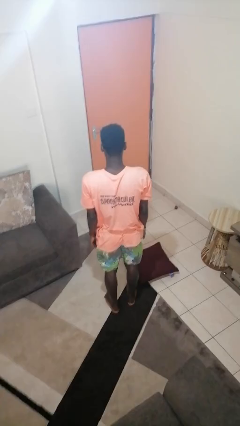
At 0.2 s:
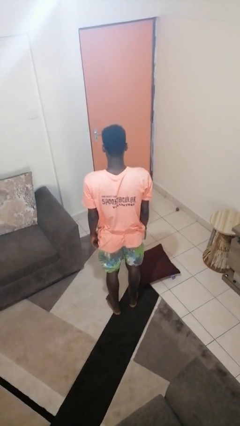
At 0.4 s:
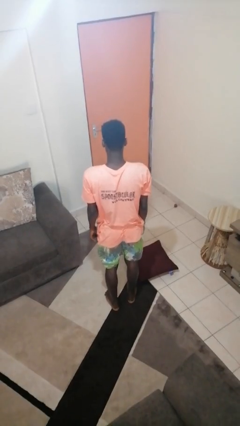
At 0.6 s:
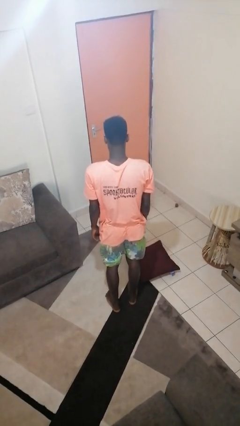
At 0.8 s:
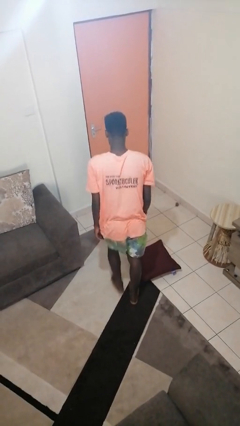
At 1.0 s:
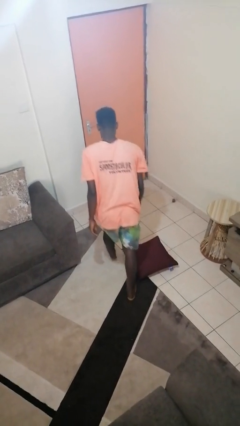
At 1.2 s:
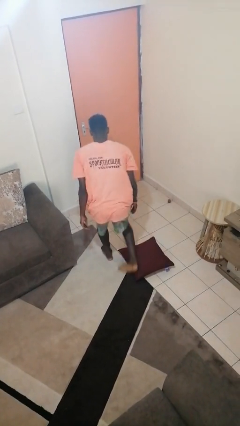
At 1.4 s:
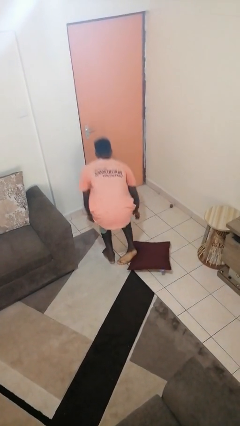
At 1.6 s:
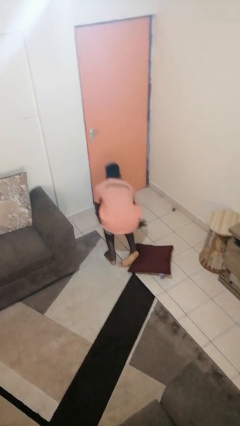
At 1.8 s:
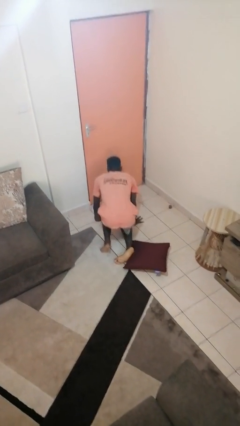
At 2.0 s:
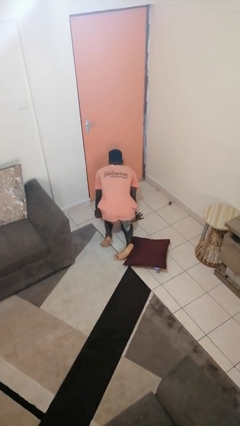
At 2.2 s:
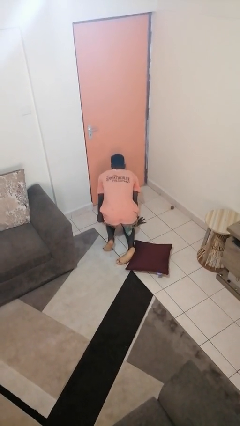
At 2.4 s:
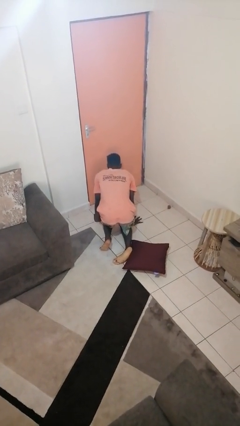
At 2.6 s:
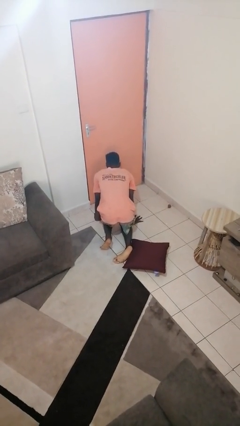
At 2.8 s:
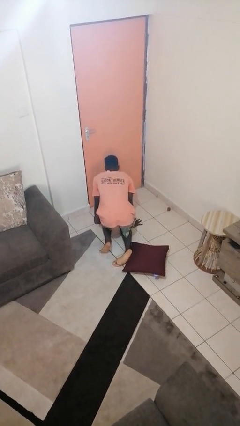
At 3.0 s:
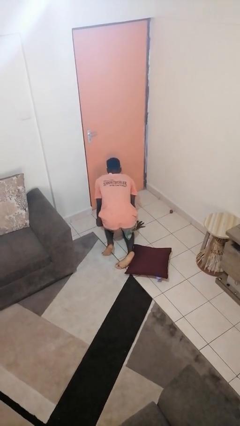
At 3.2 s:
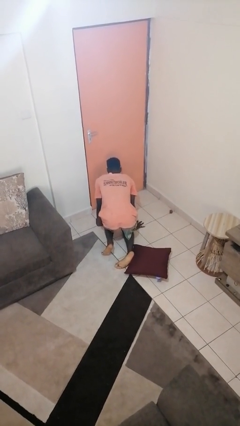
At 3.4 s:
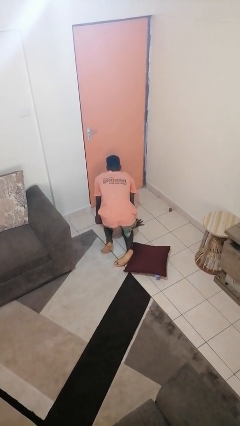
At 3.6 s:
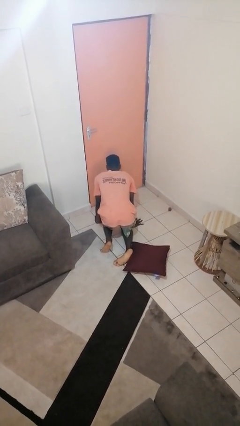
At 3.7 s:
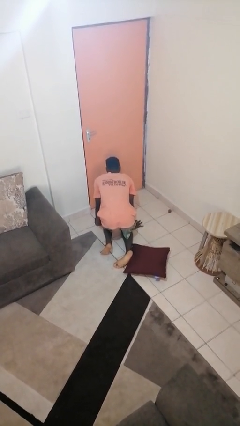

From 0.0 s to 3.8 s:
person trips on object on floor

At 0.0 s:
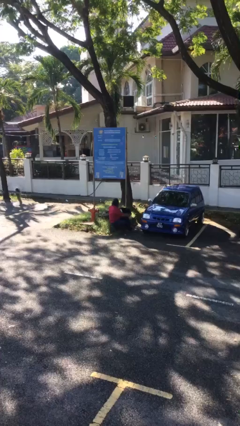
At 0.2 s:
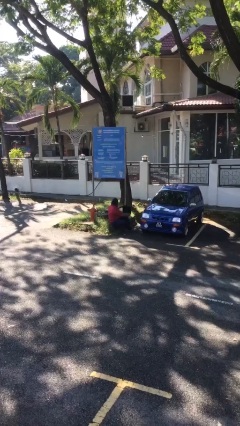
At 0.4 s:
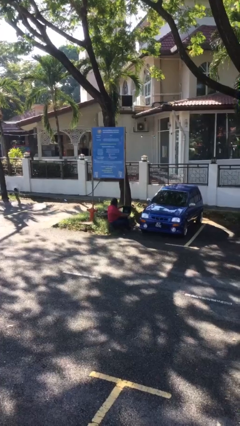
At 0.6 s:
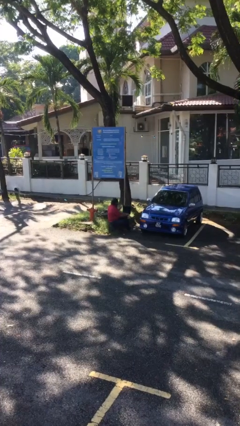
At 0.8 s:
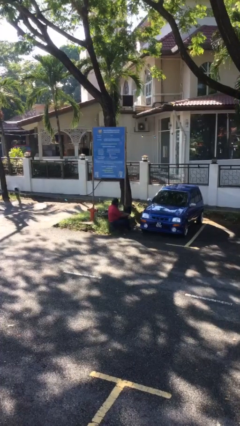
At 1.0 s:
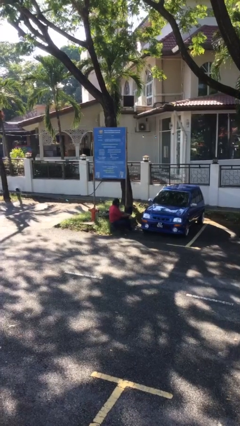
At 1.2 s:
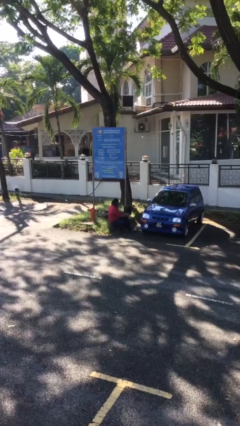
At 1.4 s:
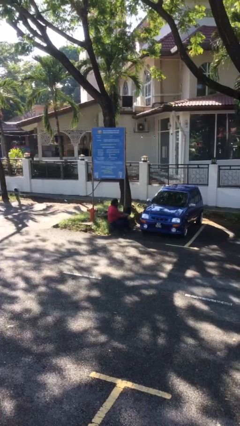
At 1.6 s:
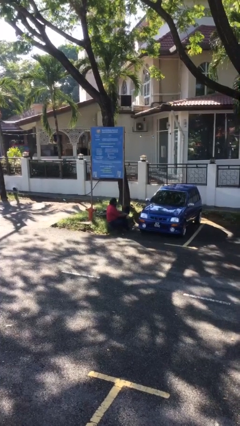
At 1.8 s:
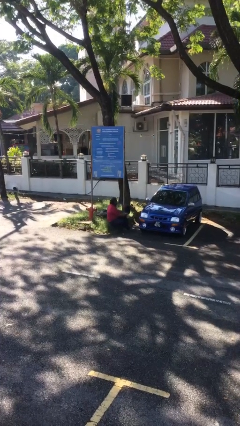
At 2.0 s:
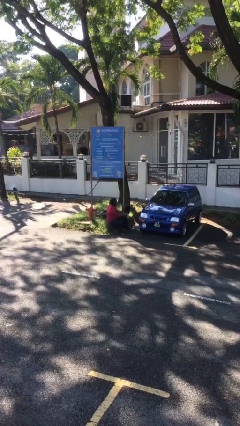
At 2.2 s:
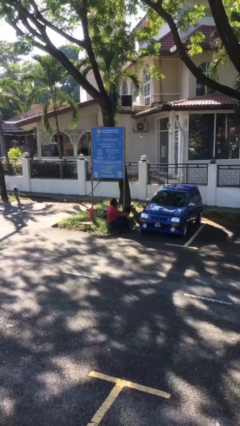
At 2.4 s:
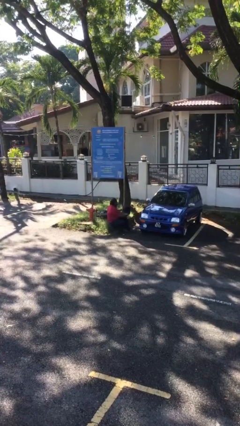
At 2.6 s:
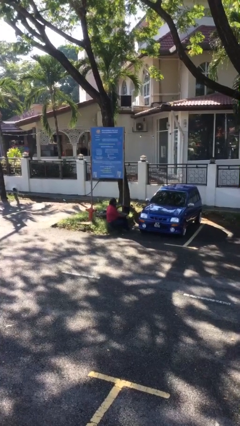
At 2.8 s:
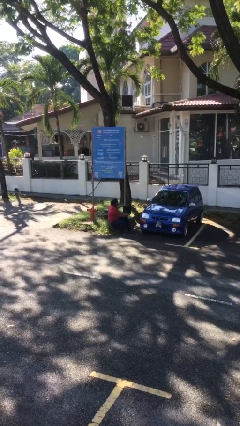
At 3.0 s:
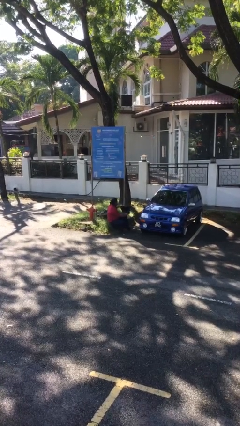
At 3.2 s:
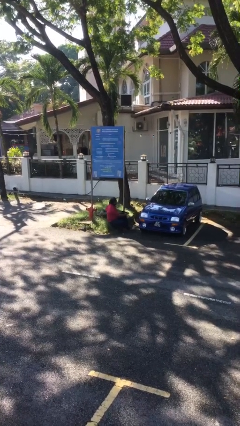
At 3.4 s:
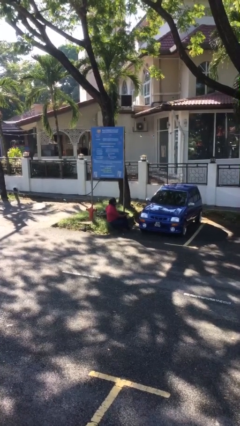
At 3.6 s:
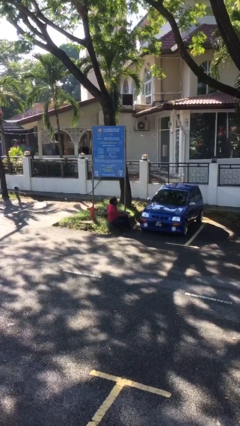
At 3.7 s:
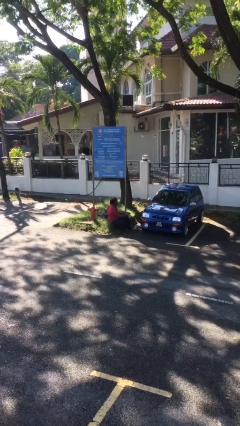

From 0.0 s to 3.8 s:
person interacts with laptop

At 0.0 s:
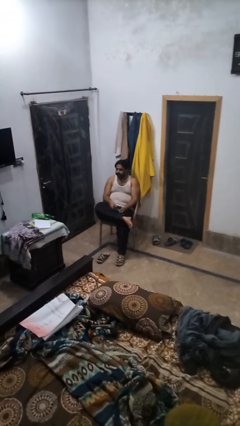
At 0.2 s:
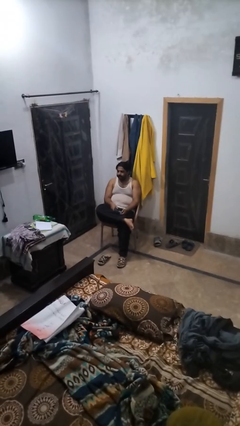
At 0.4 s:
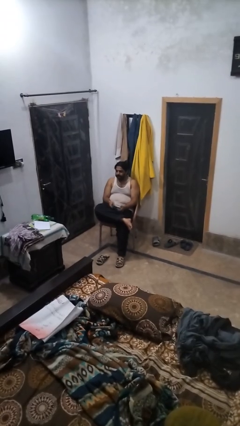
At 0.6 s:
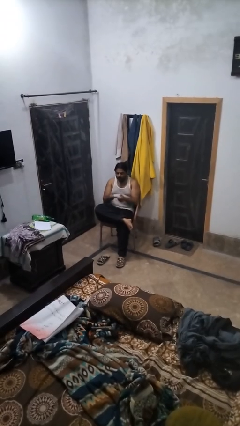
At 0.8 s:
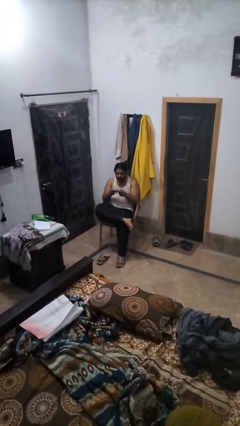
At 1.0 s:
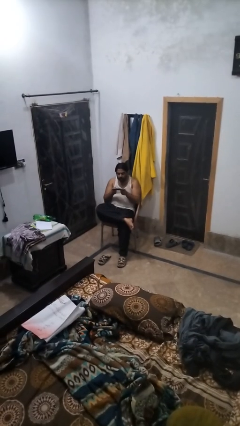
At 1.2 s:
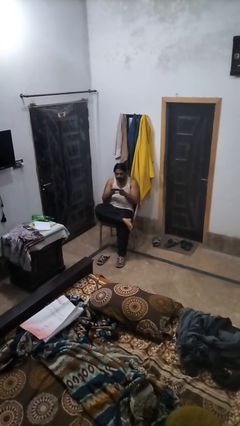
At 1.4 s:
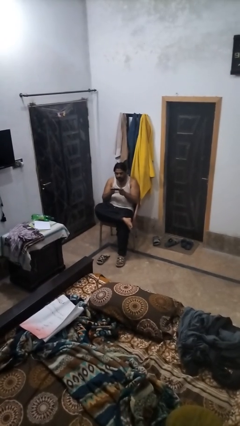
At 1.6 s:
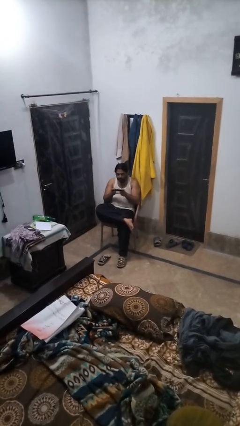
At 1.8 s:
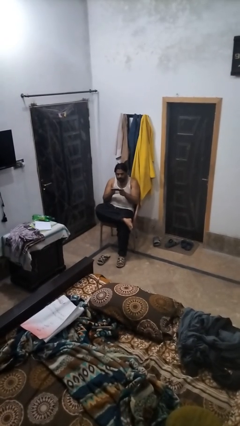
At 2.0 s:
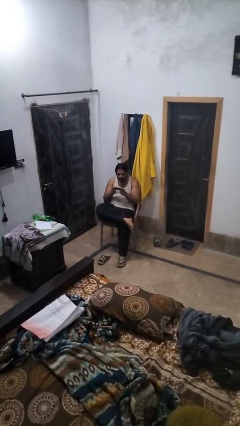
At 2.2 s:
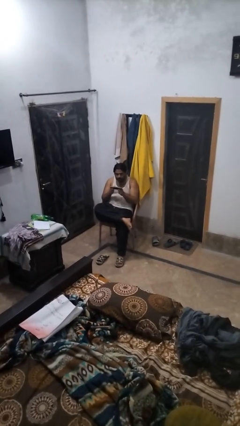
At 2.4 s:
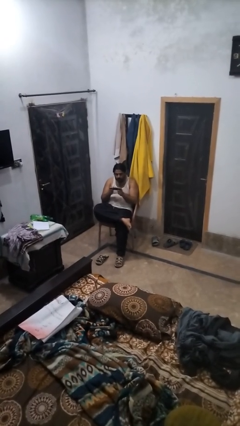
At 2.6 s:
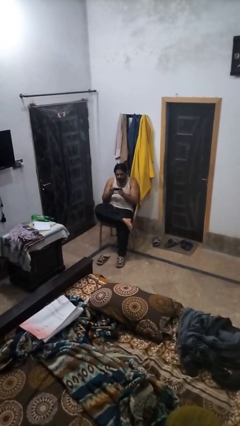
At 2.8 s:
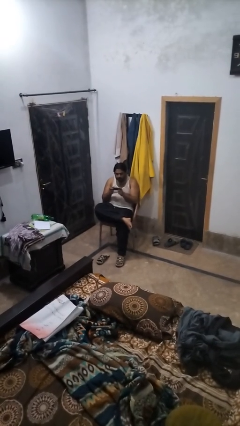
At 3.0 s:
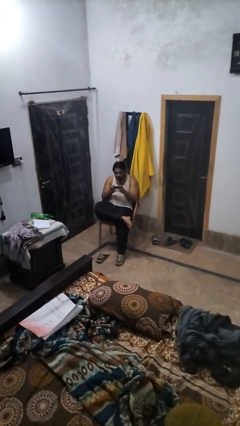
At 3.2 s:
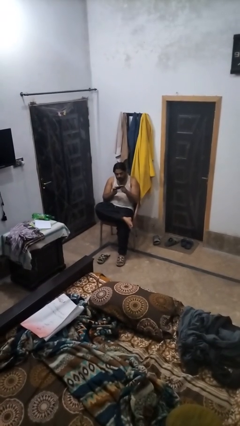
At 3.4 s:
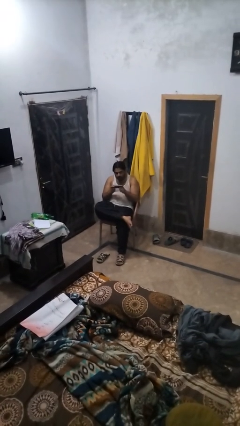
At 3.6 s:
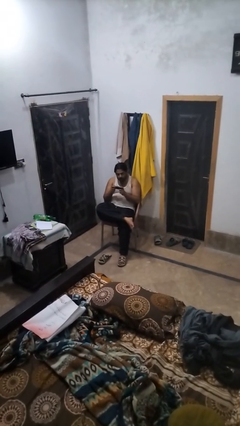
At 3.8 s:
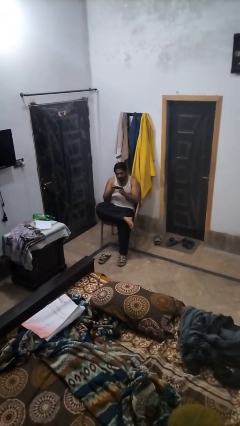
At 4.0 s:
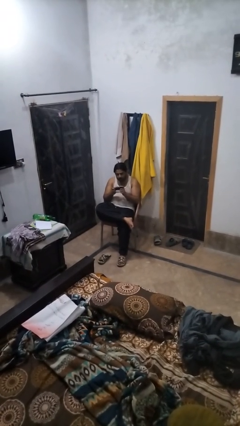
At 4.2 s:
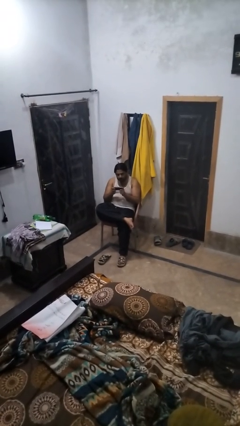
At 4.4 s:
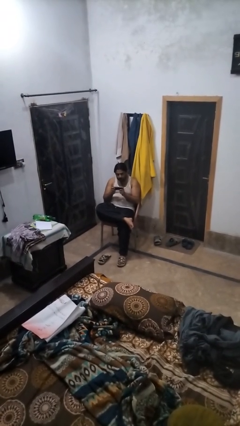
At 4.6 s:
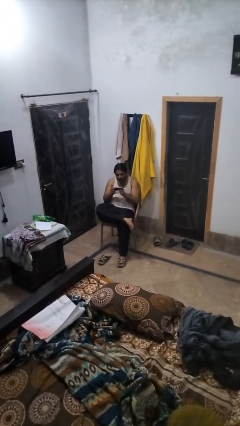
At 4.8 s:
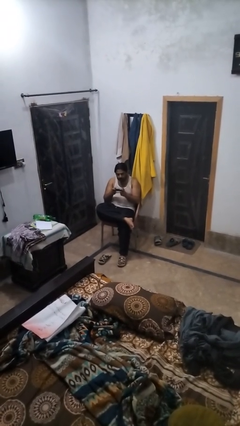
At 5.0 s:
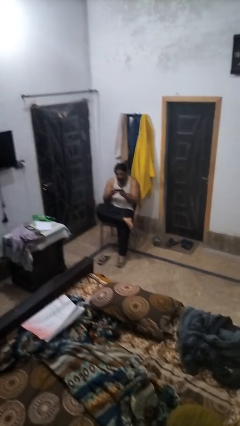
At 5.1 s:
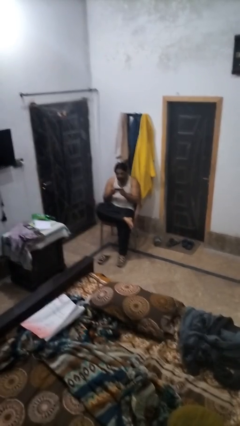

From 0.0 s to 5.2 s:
person interacts with handheld game

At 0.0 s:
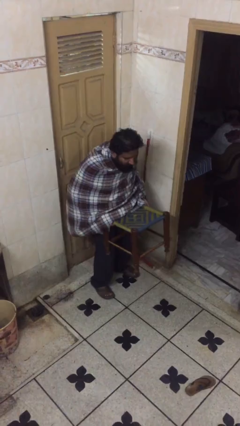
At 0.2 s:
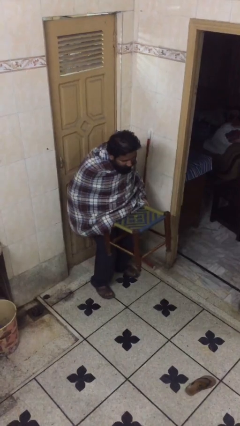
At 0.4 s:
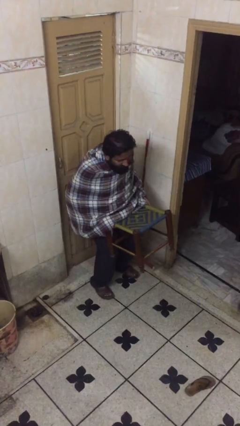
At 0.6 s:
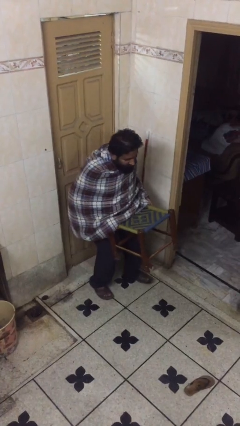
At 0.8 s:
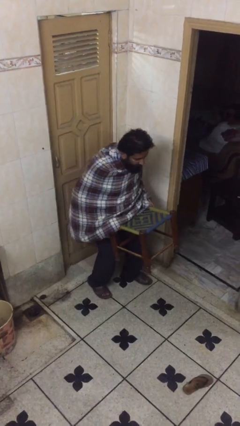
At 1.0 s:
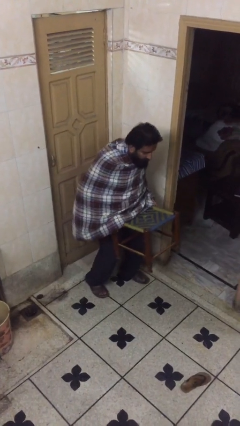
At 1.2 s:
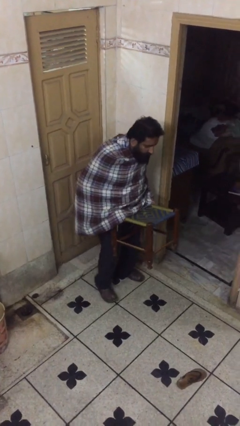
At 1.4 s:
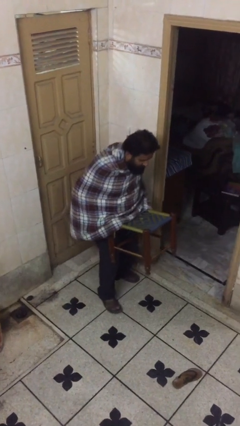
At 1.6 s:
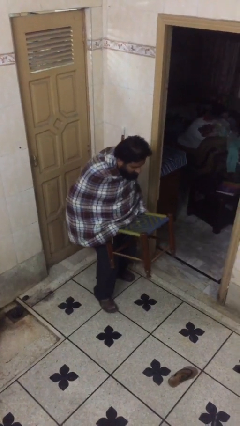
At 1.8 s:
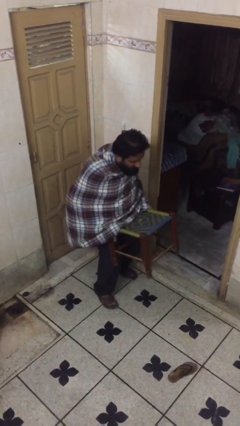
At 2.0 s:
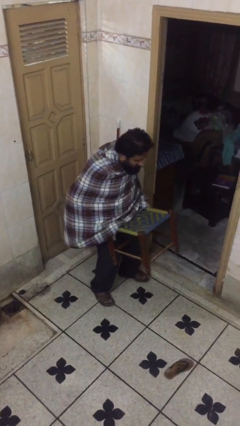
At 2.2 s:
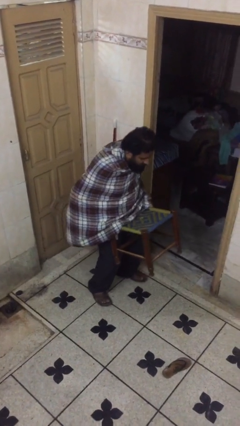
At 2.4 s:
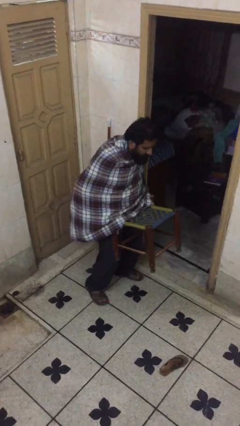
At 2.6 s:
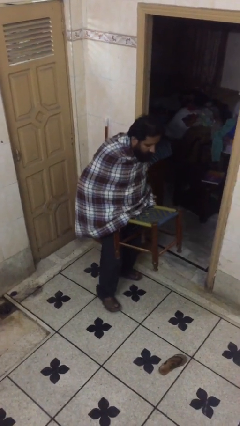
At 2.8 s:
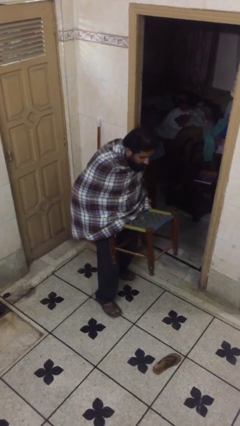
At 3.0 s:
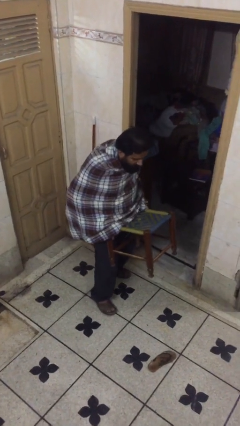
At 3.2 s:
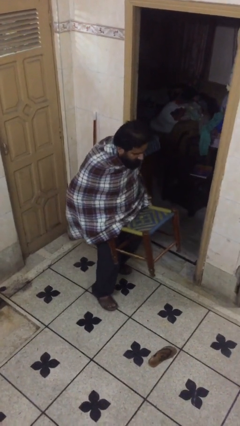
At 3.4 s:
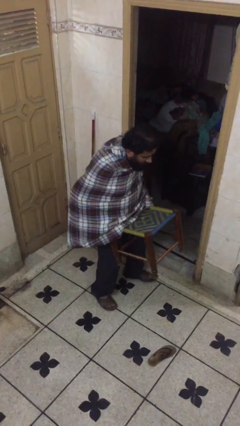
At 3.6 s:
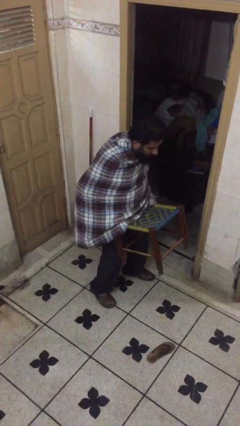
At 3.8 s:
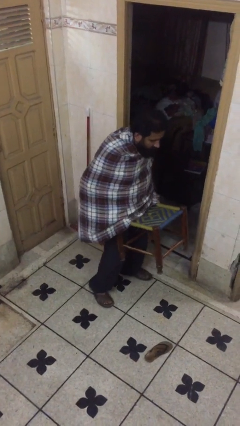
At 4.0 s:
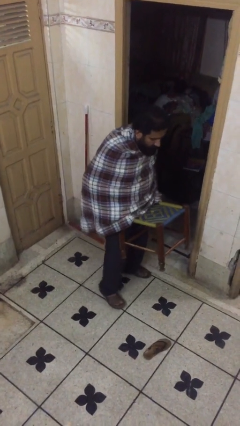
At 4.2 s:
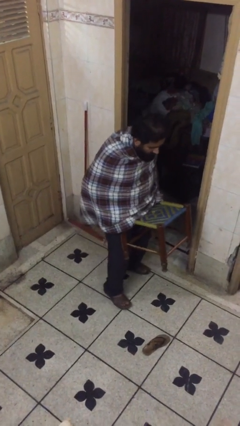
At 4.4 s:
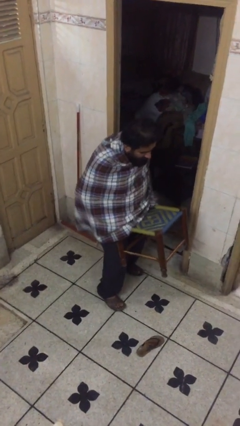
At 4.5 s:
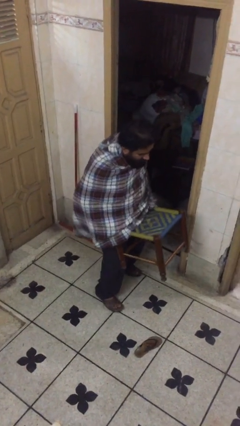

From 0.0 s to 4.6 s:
person carries heavy object

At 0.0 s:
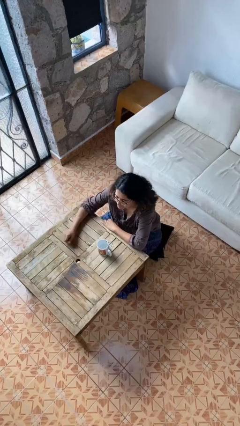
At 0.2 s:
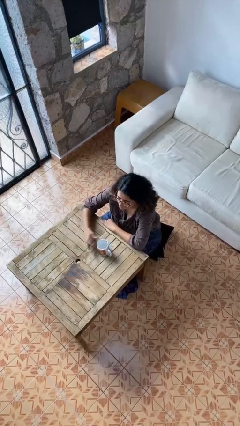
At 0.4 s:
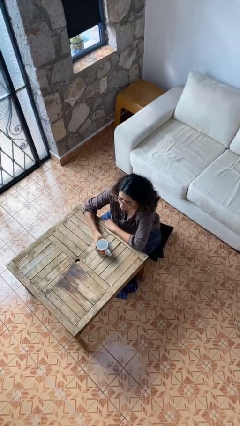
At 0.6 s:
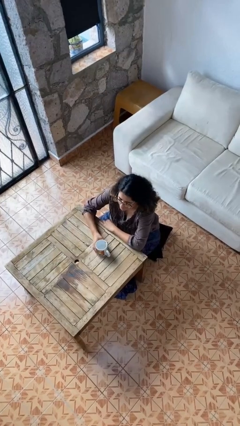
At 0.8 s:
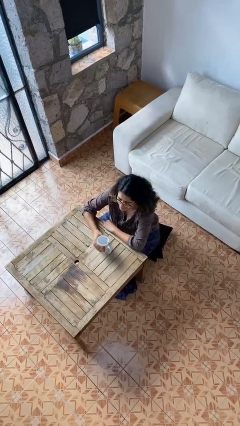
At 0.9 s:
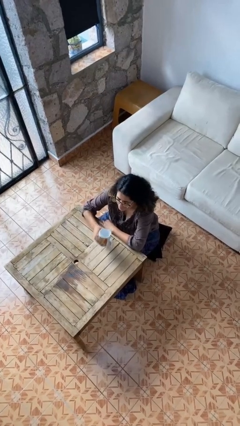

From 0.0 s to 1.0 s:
person picks up object from table
